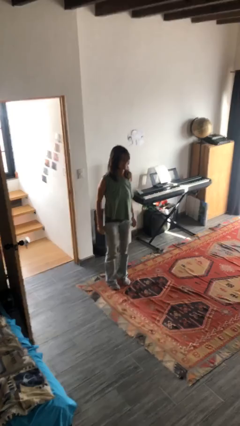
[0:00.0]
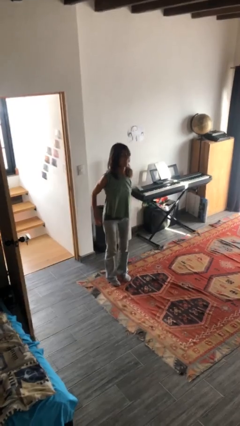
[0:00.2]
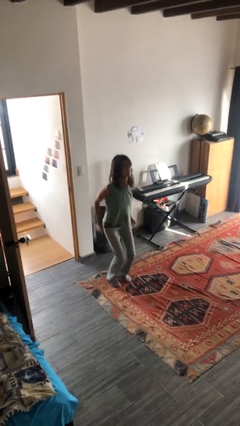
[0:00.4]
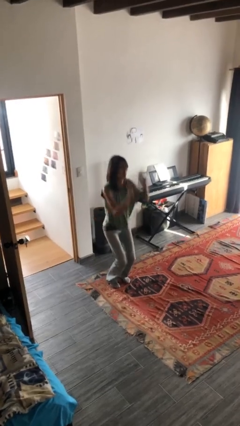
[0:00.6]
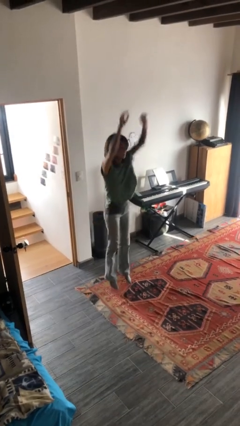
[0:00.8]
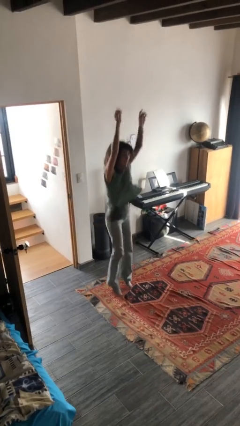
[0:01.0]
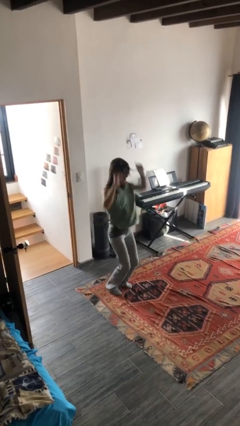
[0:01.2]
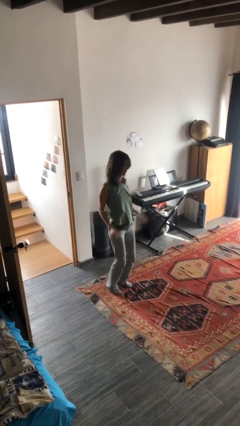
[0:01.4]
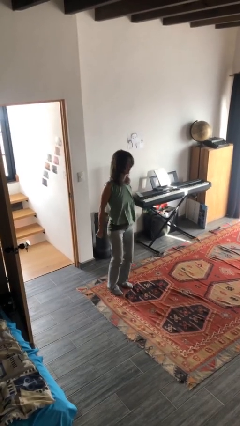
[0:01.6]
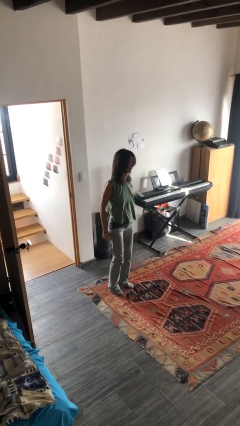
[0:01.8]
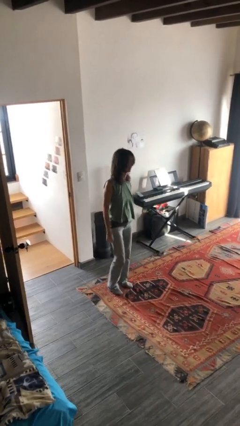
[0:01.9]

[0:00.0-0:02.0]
person jumps

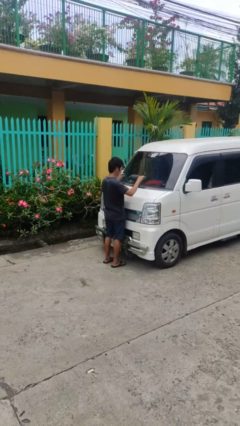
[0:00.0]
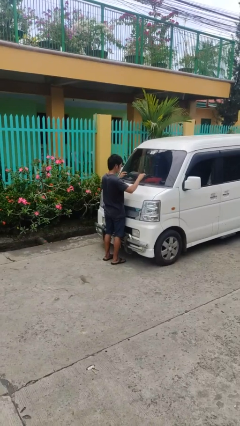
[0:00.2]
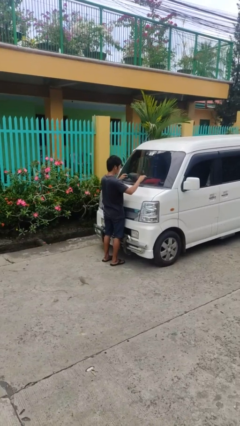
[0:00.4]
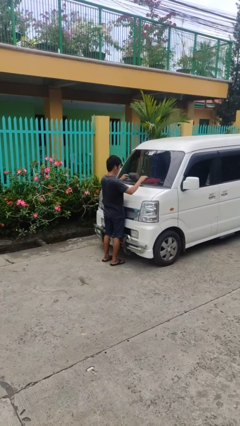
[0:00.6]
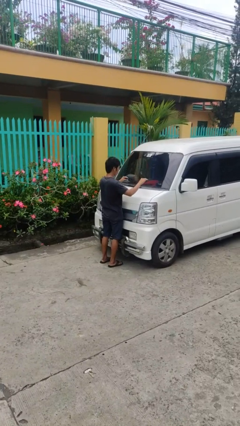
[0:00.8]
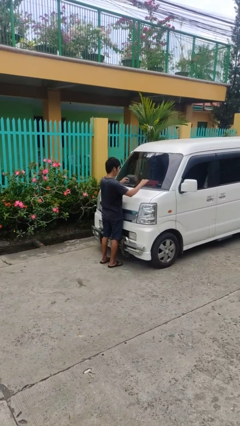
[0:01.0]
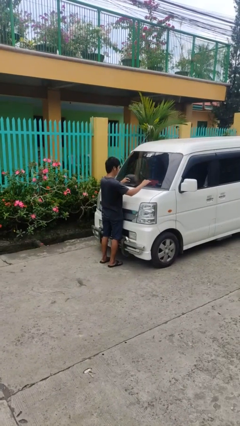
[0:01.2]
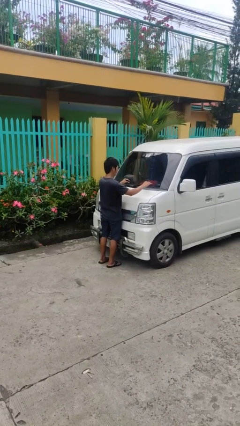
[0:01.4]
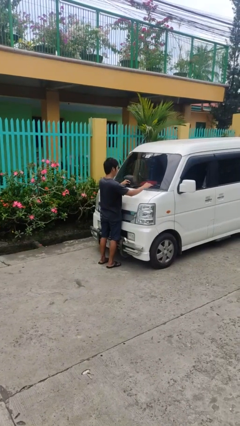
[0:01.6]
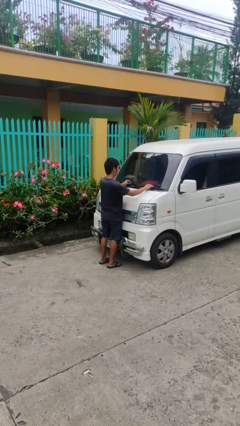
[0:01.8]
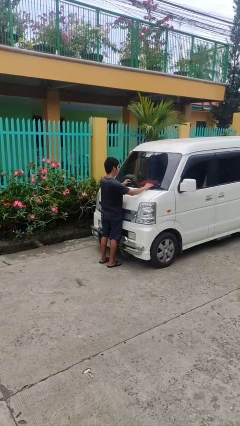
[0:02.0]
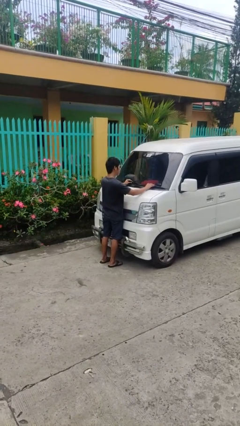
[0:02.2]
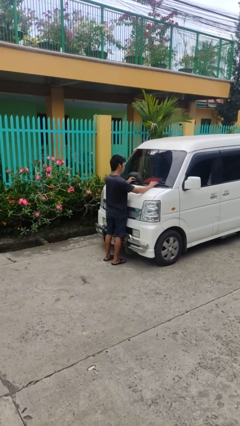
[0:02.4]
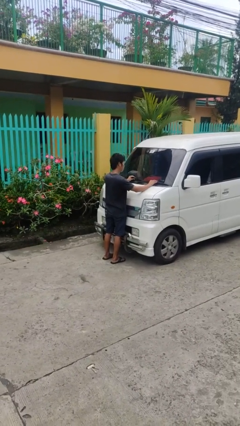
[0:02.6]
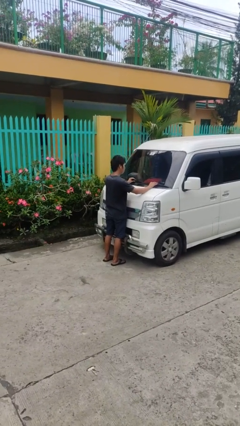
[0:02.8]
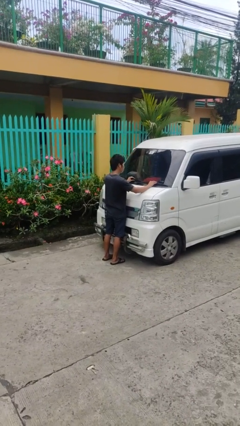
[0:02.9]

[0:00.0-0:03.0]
person flips down car wipers

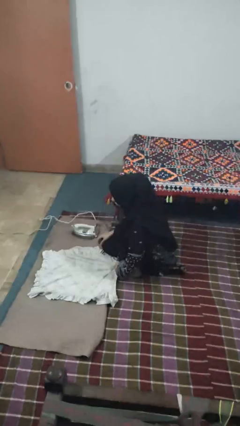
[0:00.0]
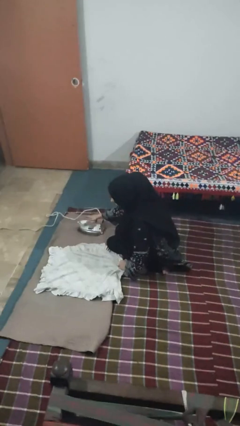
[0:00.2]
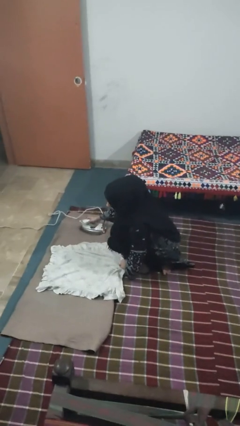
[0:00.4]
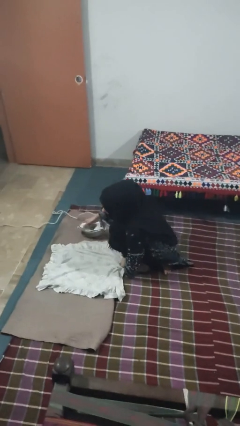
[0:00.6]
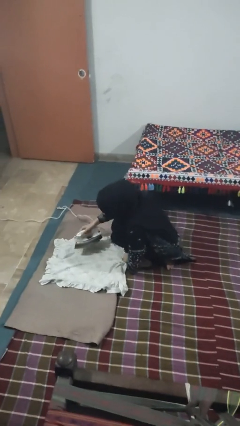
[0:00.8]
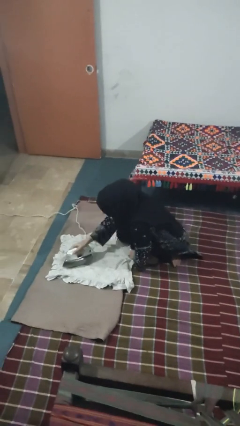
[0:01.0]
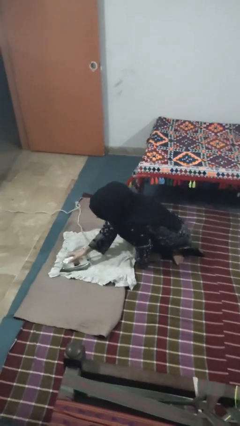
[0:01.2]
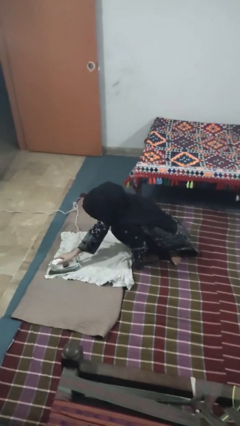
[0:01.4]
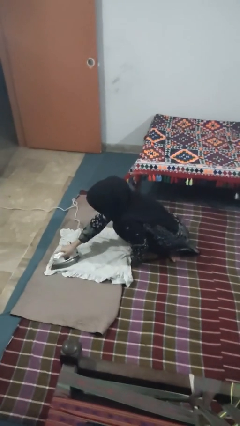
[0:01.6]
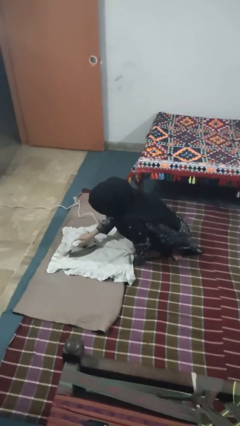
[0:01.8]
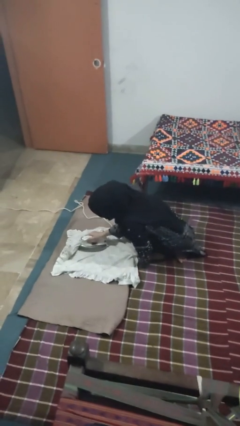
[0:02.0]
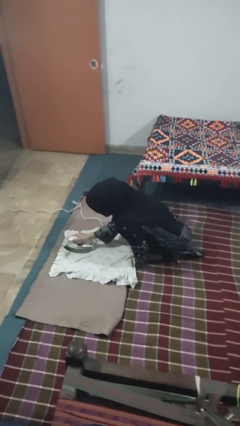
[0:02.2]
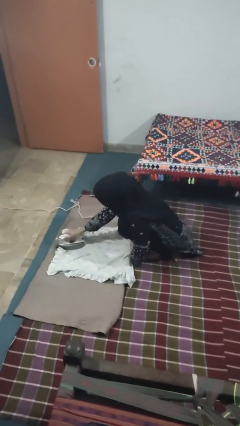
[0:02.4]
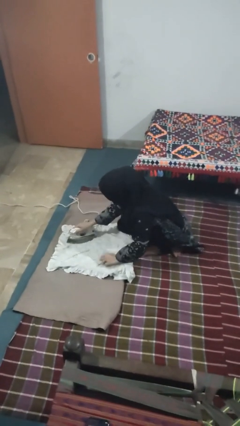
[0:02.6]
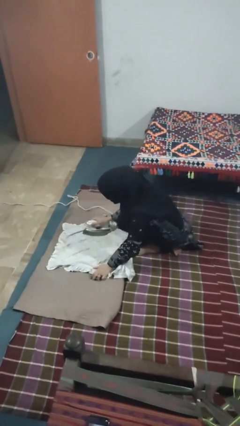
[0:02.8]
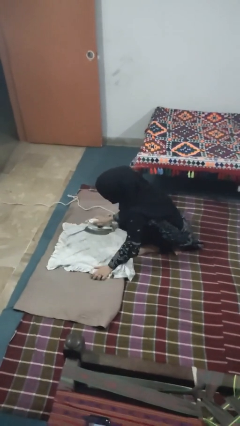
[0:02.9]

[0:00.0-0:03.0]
person irons clothes

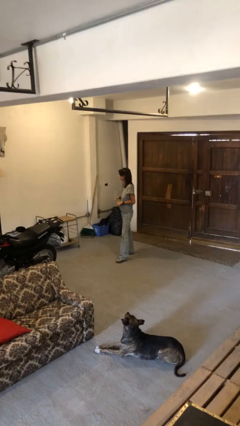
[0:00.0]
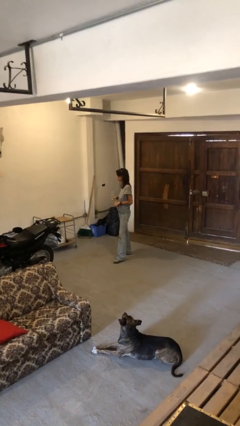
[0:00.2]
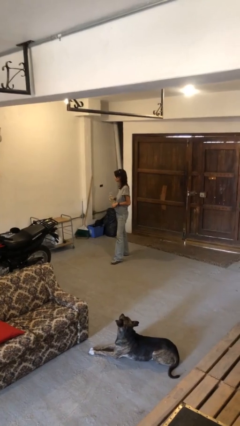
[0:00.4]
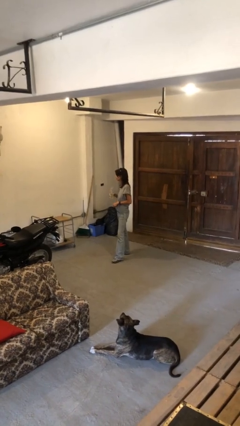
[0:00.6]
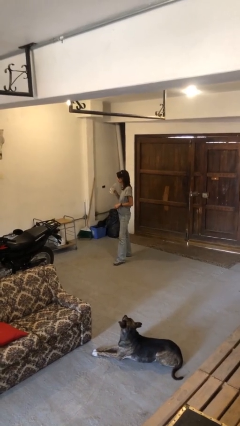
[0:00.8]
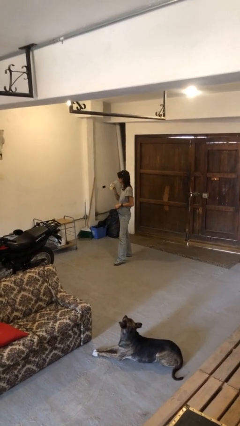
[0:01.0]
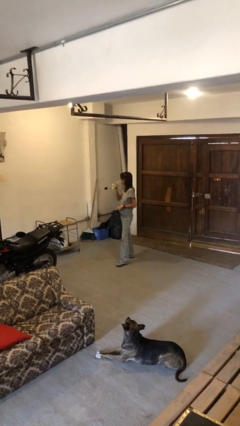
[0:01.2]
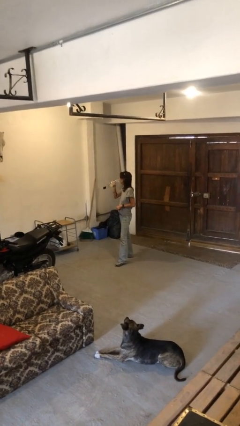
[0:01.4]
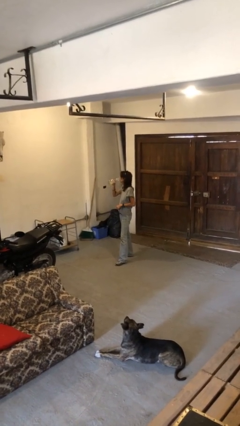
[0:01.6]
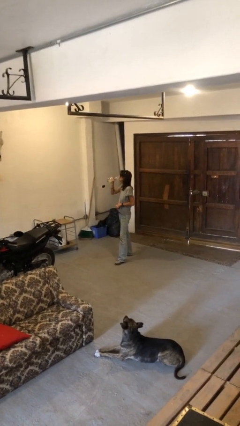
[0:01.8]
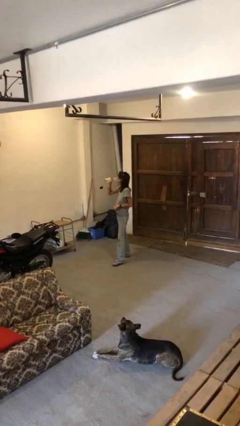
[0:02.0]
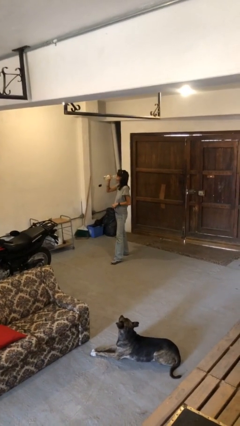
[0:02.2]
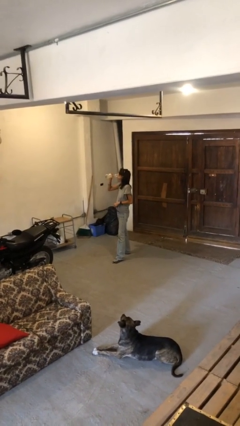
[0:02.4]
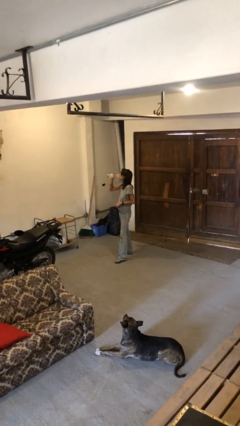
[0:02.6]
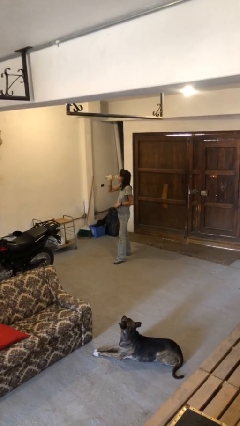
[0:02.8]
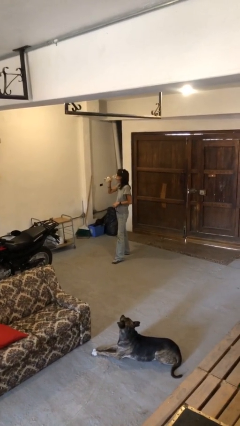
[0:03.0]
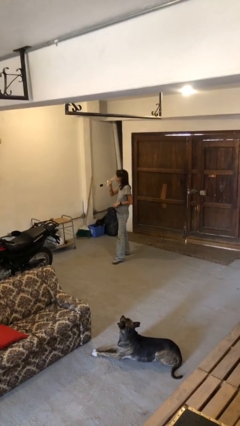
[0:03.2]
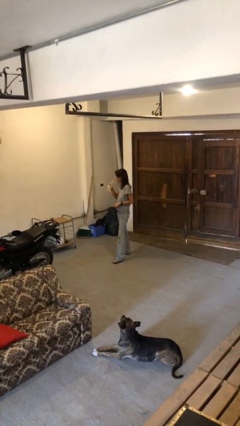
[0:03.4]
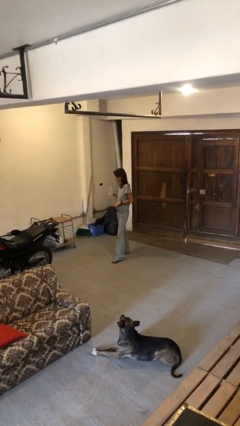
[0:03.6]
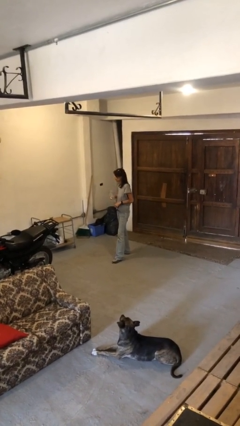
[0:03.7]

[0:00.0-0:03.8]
person drinks from bottle

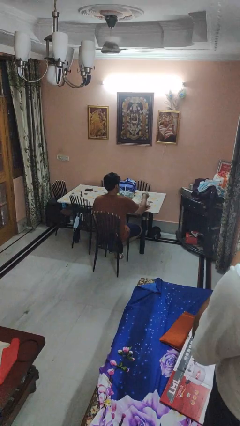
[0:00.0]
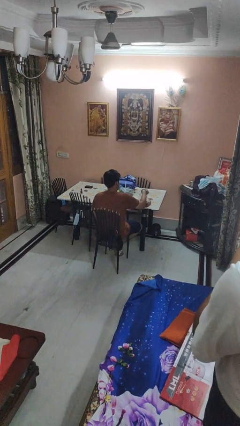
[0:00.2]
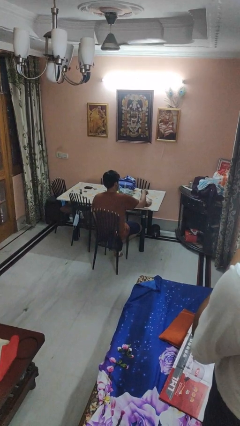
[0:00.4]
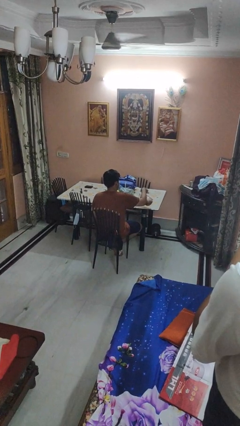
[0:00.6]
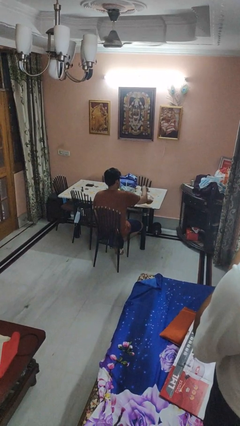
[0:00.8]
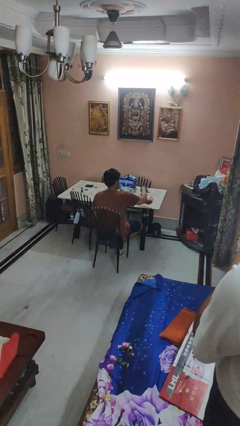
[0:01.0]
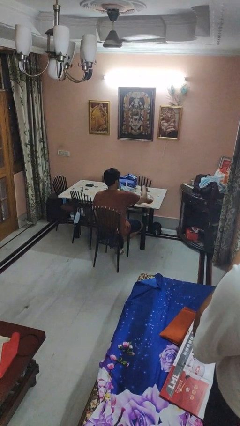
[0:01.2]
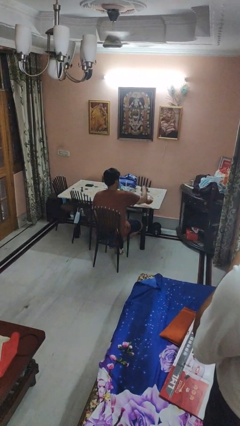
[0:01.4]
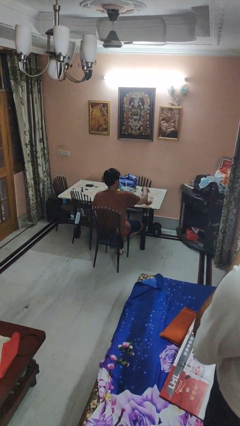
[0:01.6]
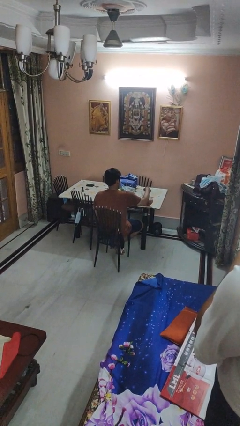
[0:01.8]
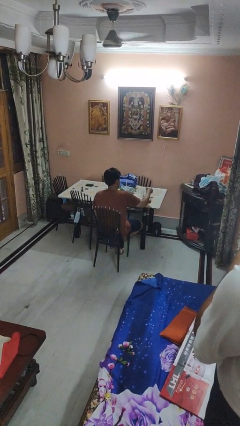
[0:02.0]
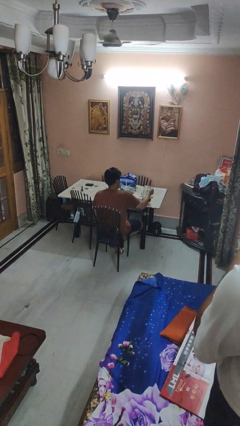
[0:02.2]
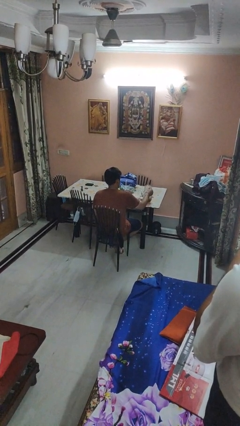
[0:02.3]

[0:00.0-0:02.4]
person pours coffee into mug

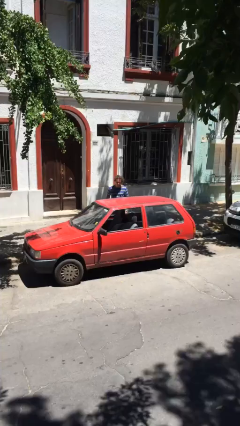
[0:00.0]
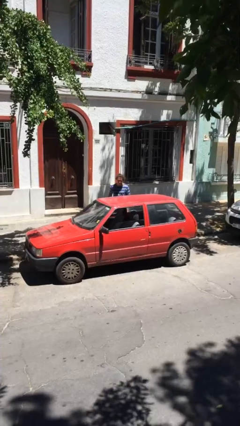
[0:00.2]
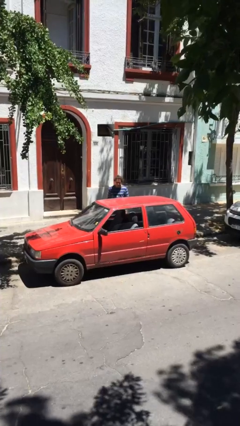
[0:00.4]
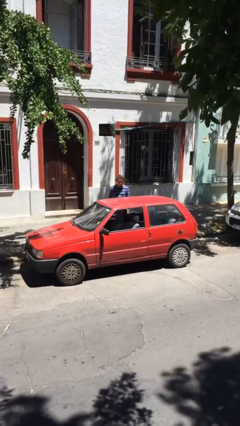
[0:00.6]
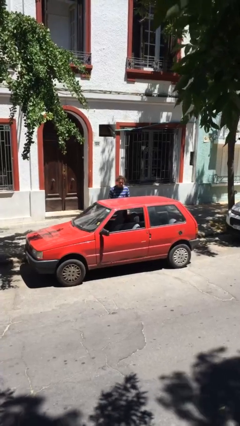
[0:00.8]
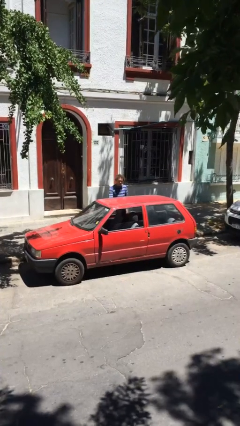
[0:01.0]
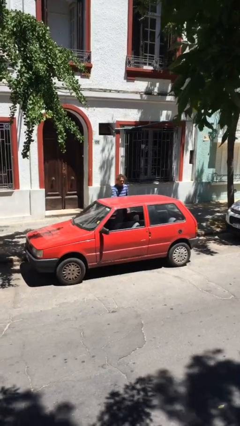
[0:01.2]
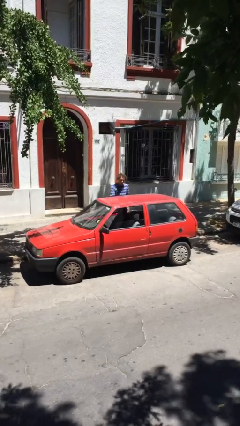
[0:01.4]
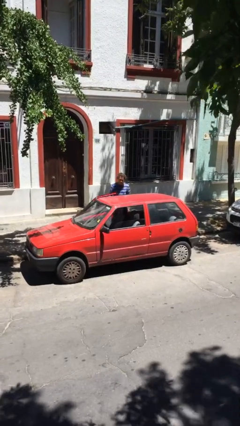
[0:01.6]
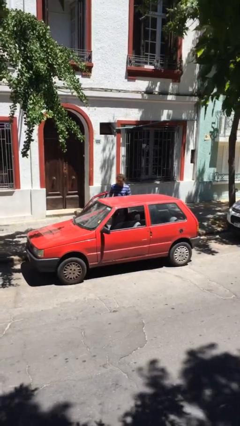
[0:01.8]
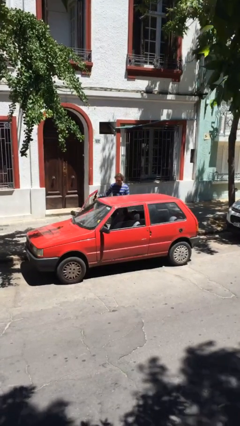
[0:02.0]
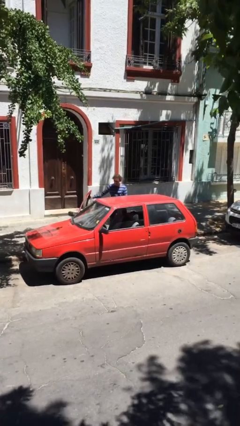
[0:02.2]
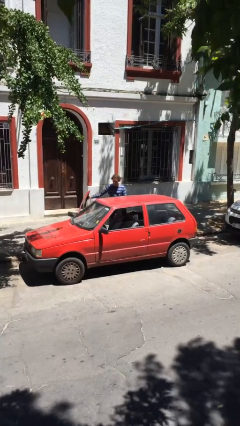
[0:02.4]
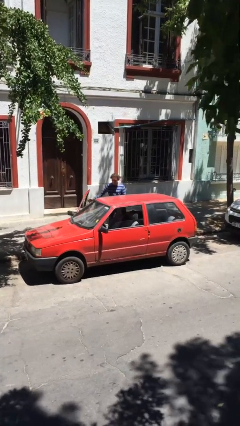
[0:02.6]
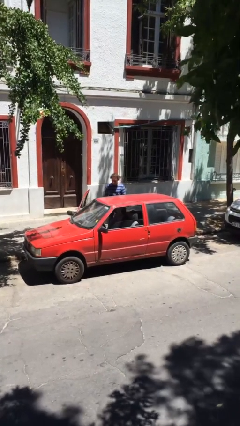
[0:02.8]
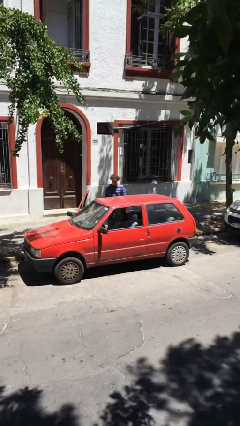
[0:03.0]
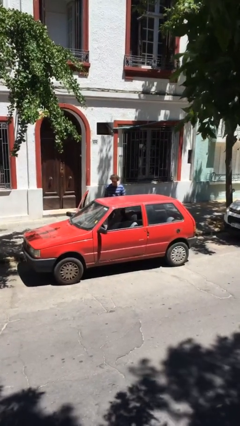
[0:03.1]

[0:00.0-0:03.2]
person opens car door

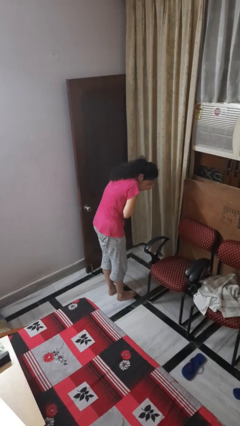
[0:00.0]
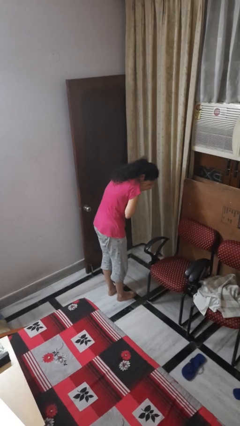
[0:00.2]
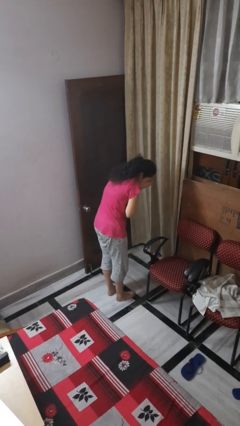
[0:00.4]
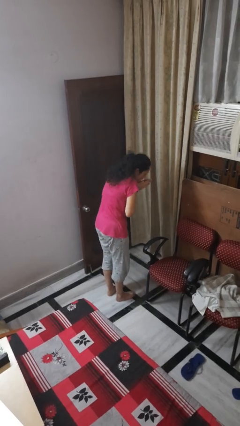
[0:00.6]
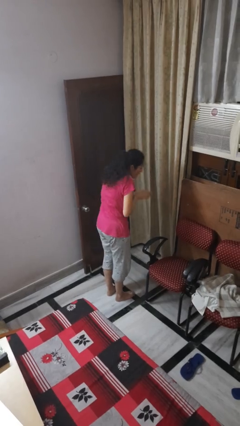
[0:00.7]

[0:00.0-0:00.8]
person sneezes into hand
